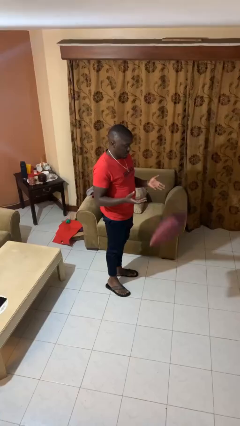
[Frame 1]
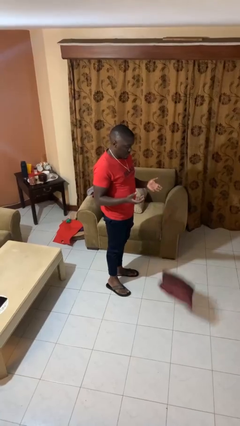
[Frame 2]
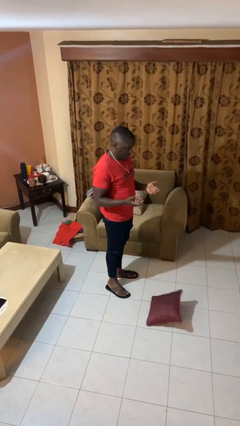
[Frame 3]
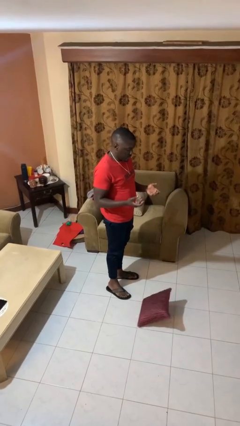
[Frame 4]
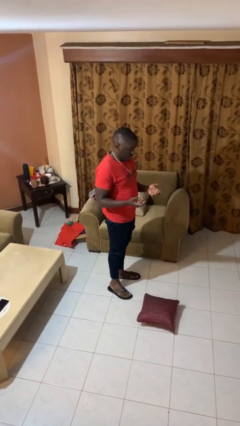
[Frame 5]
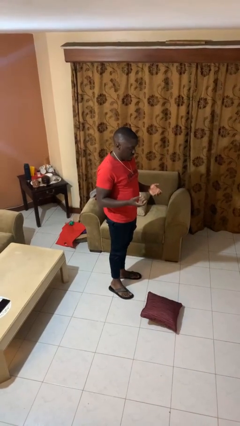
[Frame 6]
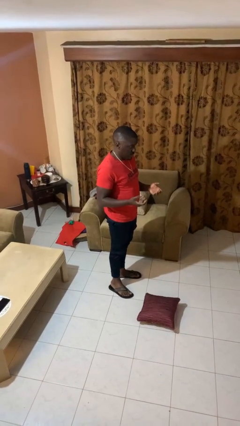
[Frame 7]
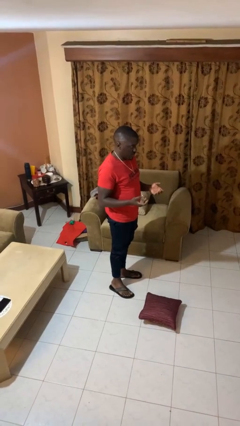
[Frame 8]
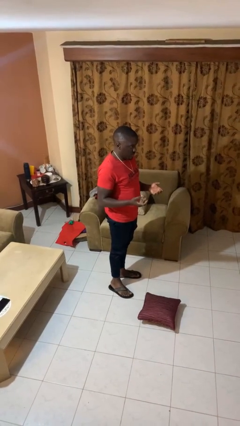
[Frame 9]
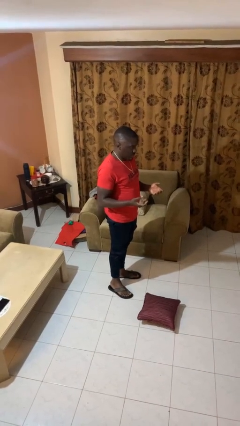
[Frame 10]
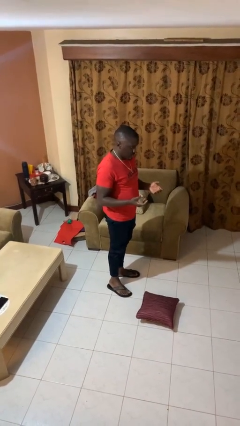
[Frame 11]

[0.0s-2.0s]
person drops object

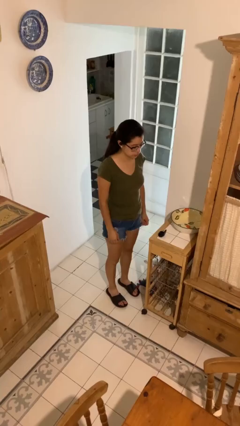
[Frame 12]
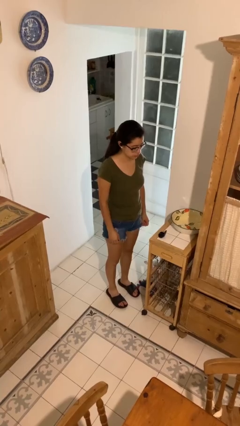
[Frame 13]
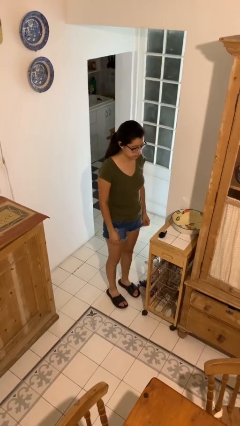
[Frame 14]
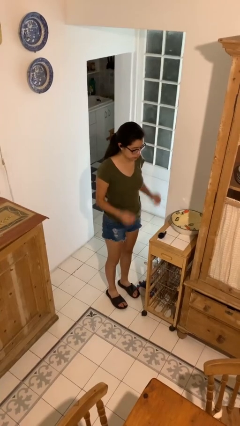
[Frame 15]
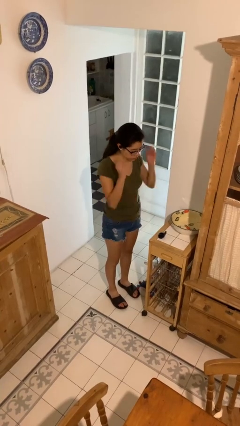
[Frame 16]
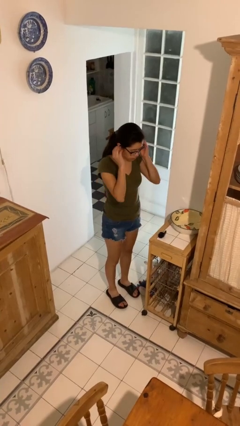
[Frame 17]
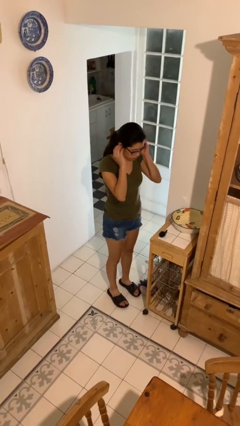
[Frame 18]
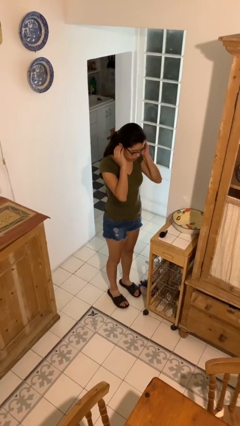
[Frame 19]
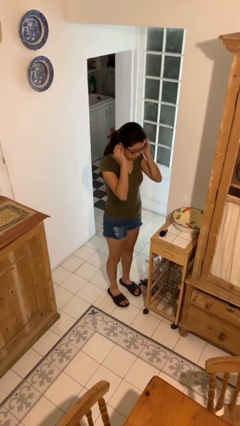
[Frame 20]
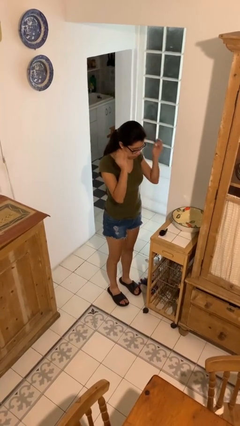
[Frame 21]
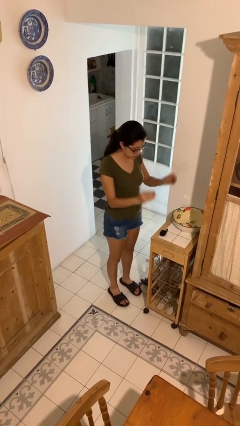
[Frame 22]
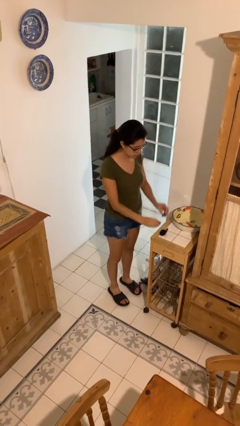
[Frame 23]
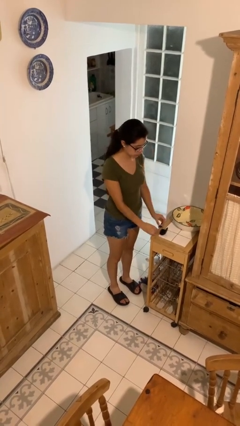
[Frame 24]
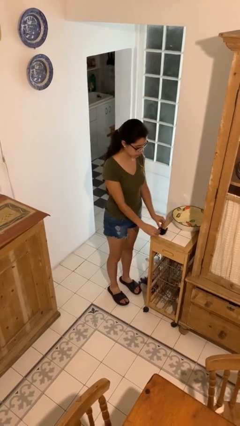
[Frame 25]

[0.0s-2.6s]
person takes off headphones

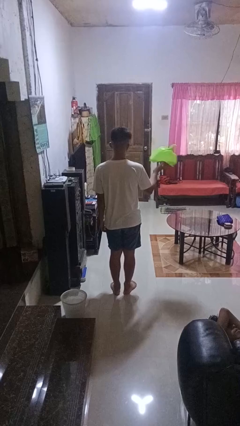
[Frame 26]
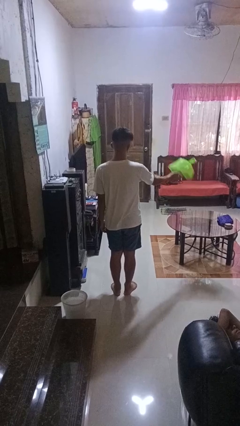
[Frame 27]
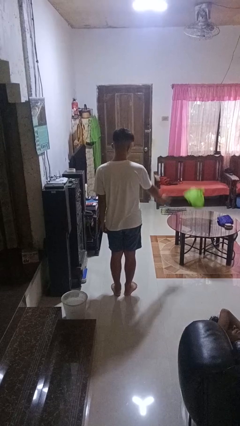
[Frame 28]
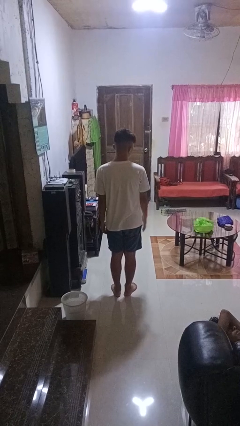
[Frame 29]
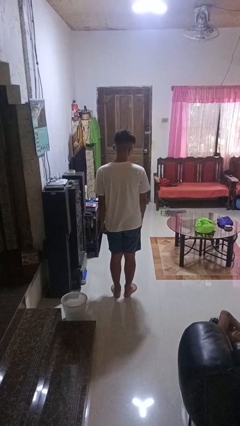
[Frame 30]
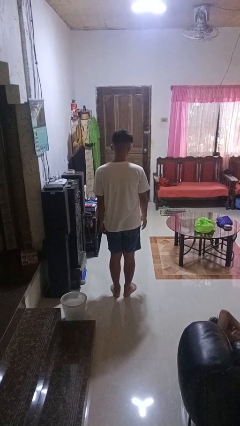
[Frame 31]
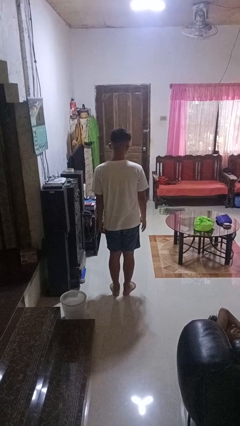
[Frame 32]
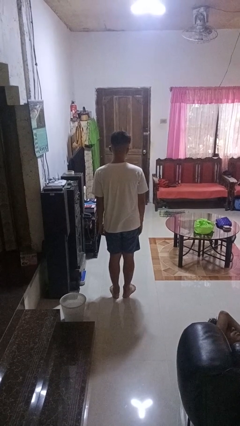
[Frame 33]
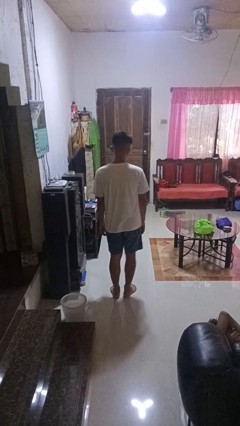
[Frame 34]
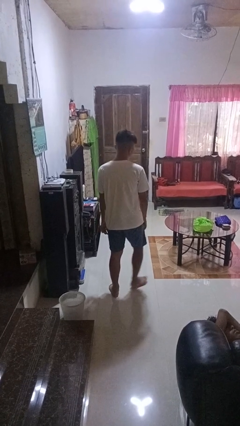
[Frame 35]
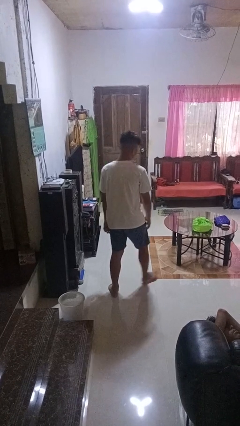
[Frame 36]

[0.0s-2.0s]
person throws object on table

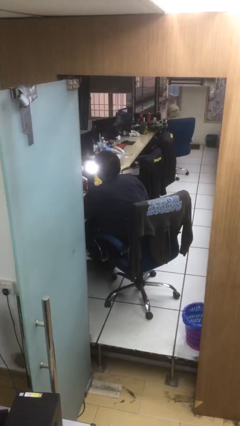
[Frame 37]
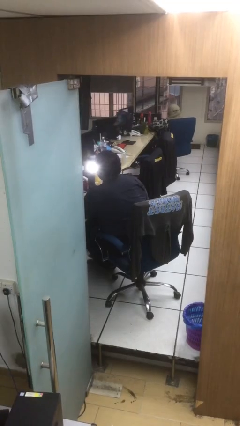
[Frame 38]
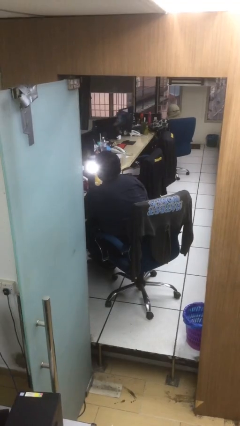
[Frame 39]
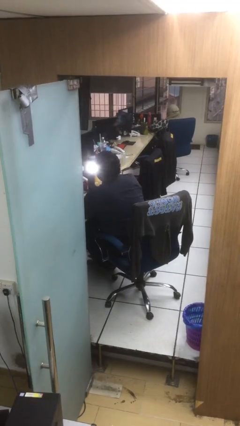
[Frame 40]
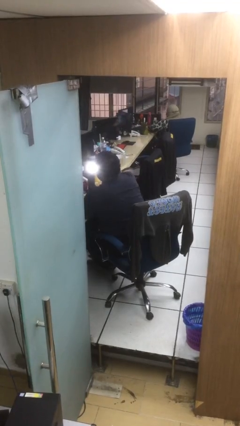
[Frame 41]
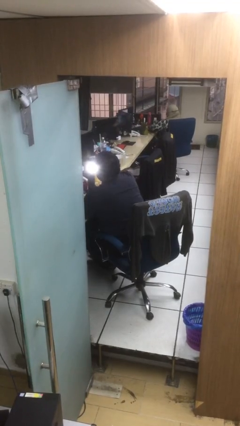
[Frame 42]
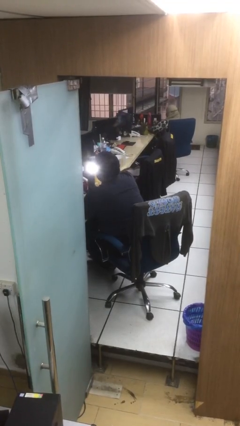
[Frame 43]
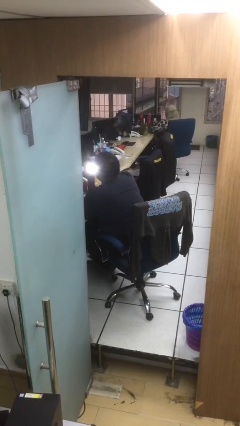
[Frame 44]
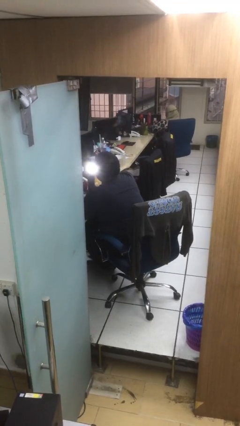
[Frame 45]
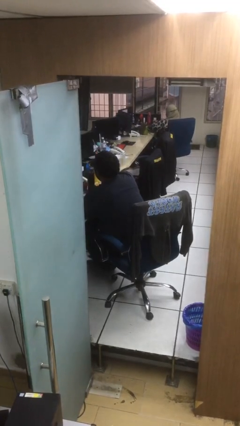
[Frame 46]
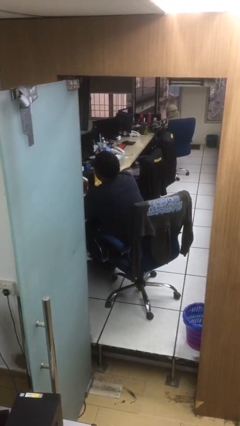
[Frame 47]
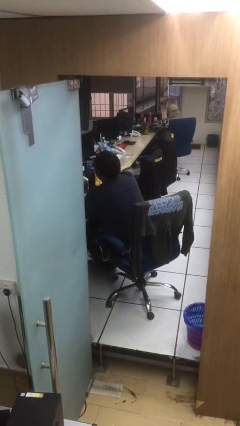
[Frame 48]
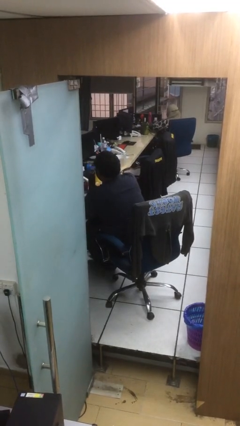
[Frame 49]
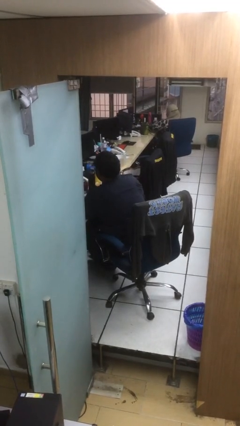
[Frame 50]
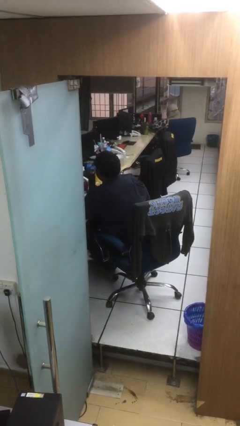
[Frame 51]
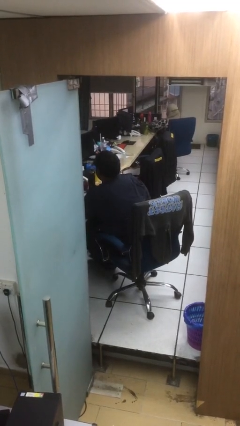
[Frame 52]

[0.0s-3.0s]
person turns off lamp

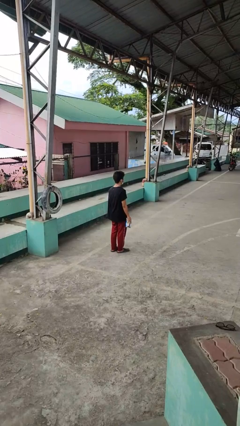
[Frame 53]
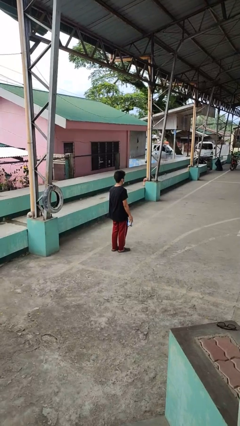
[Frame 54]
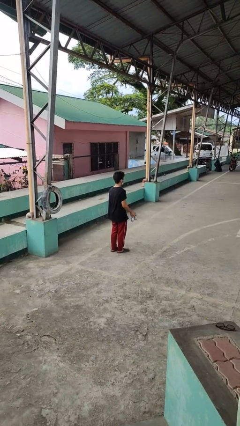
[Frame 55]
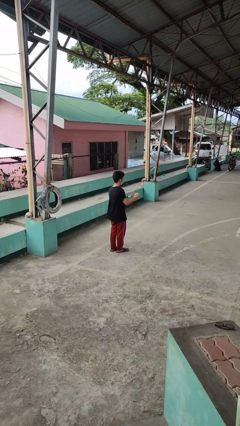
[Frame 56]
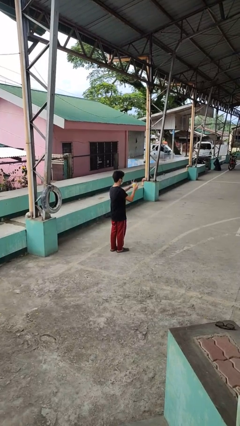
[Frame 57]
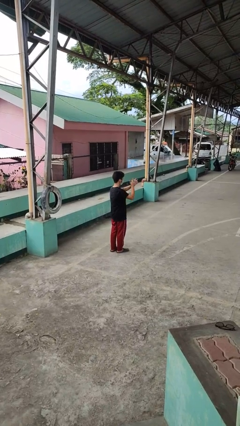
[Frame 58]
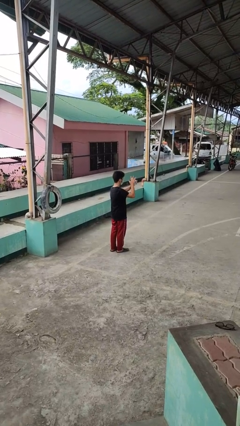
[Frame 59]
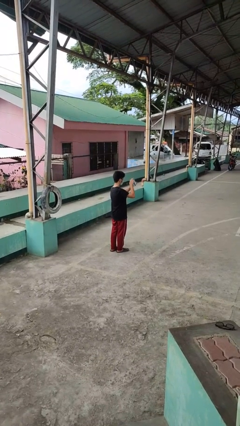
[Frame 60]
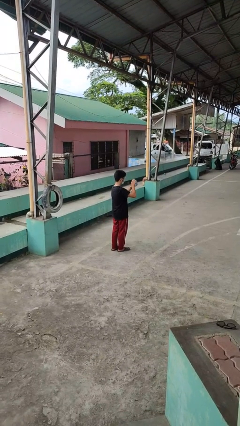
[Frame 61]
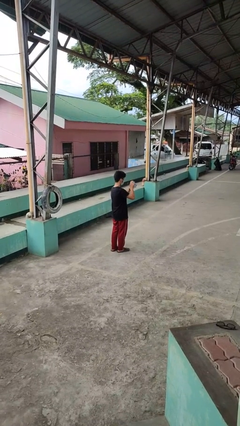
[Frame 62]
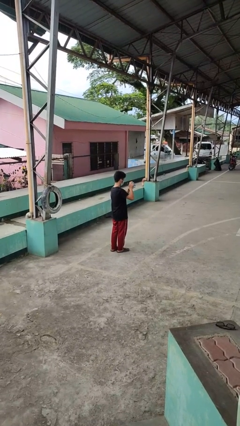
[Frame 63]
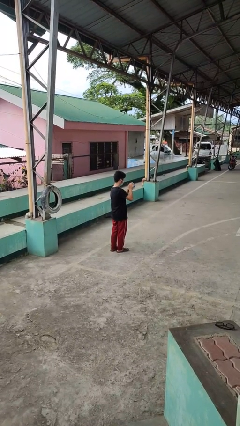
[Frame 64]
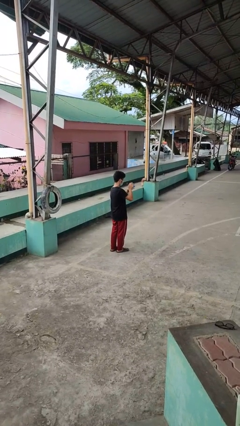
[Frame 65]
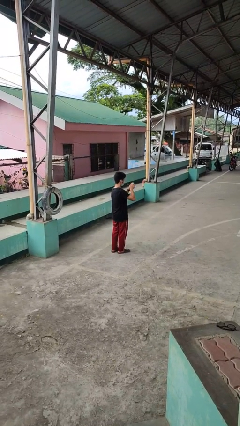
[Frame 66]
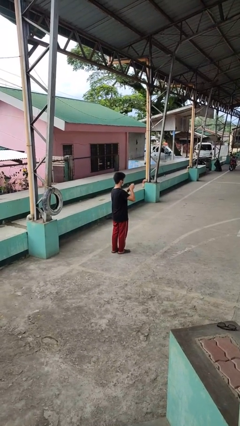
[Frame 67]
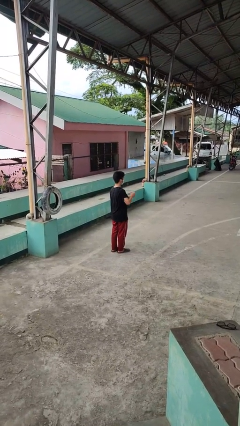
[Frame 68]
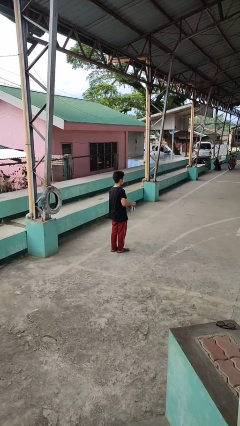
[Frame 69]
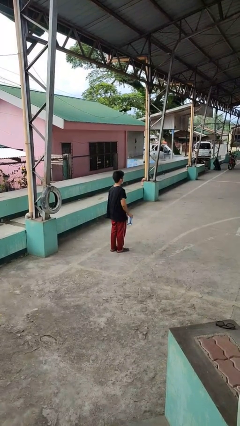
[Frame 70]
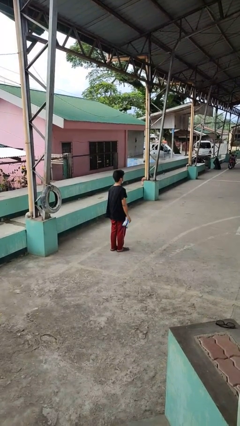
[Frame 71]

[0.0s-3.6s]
person squeezes object

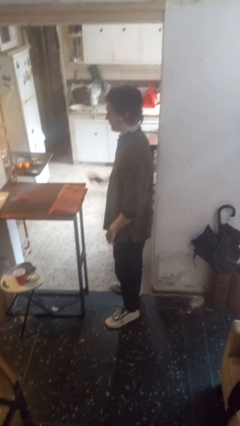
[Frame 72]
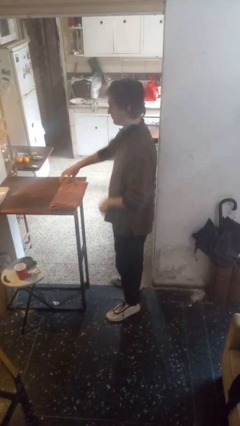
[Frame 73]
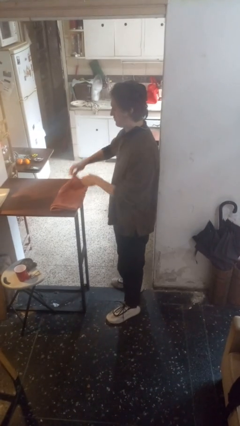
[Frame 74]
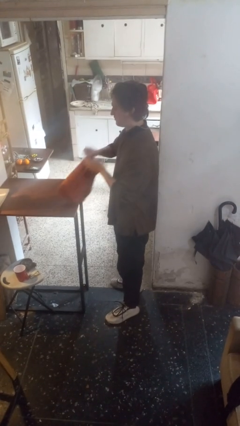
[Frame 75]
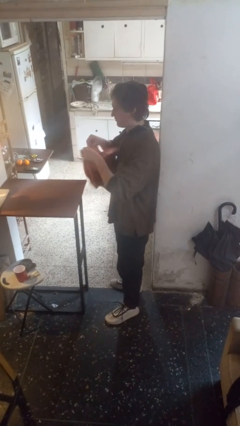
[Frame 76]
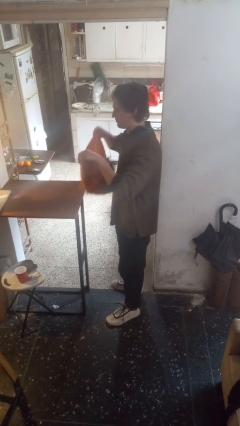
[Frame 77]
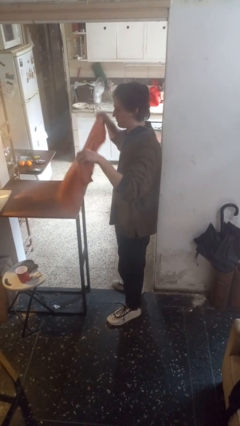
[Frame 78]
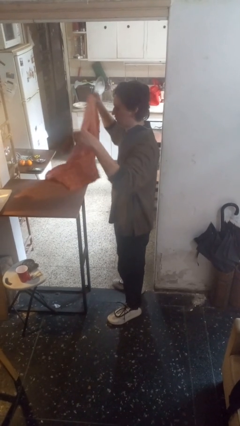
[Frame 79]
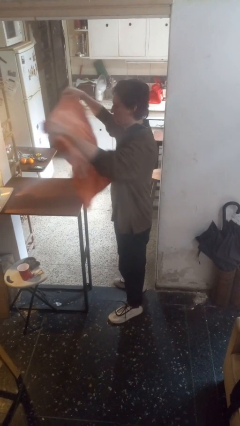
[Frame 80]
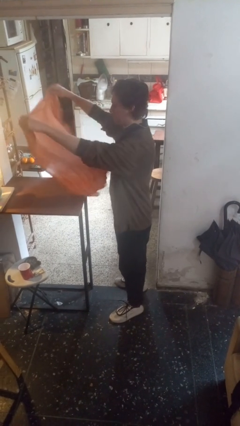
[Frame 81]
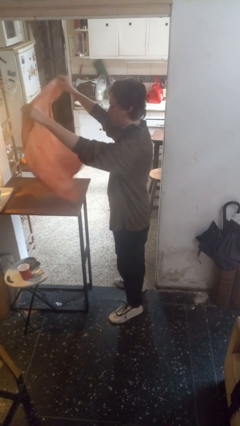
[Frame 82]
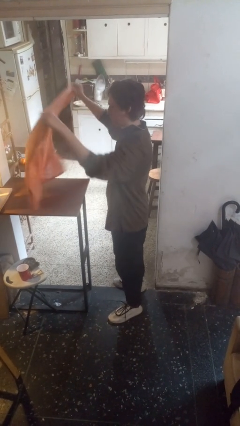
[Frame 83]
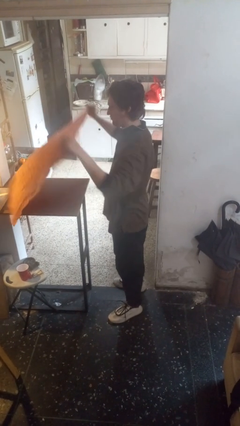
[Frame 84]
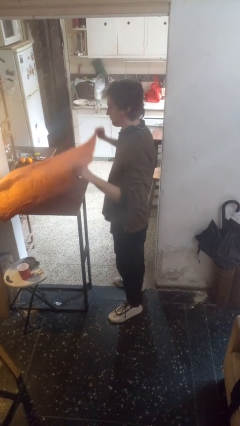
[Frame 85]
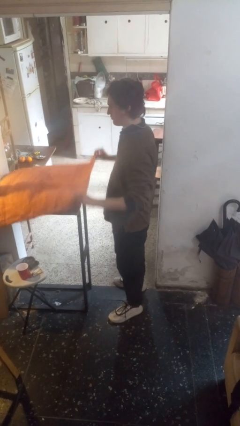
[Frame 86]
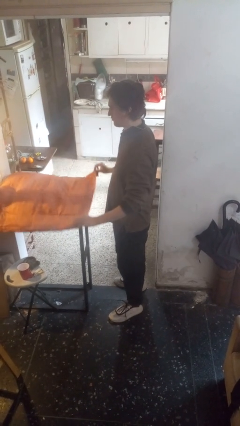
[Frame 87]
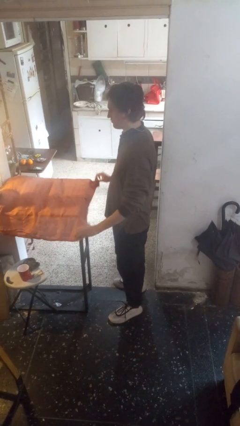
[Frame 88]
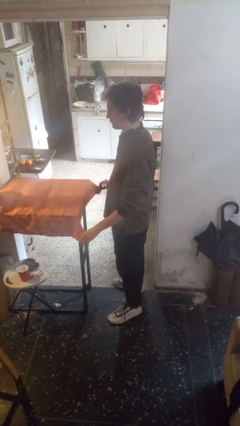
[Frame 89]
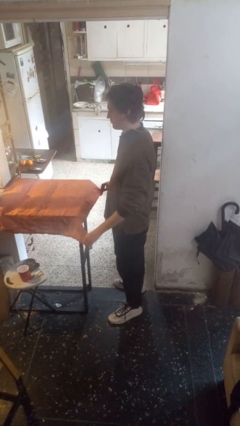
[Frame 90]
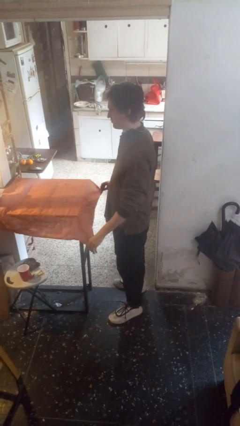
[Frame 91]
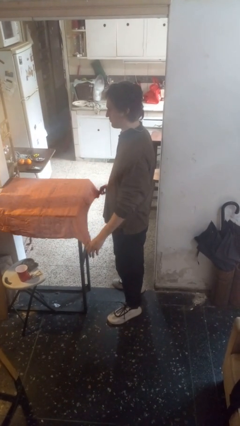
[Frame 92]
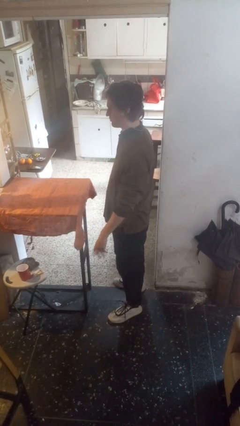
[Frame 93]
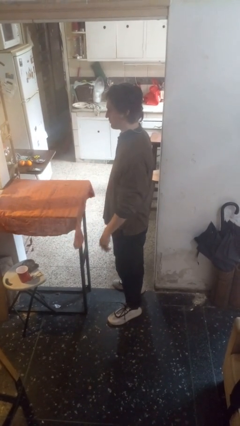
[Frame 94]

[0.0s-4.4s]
person spreads tablecloth
